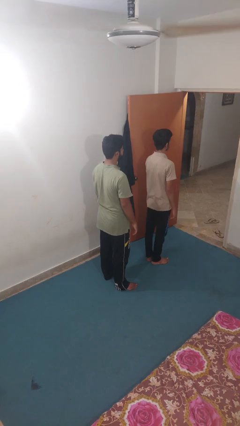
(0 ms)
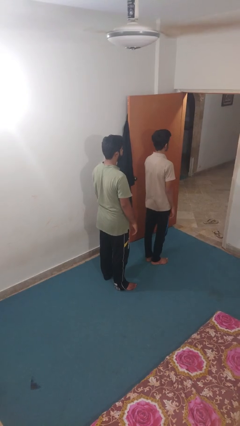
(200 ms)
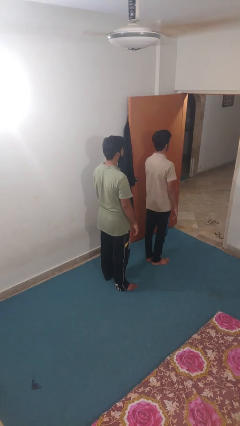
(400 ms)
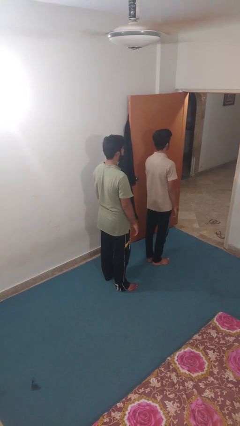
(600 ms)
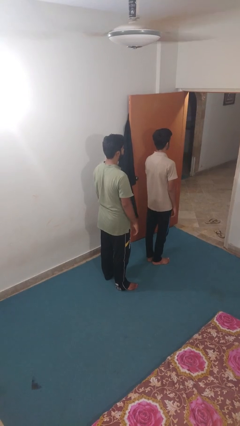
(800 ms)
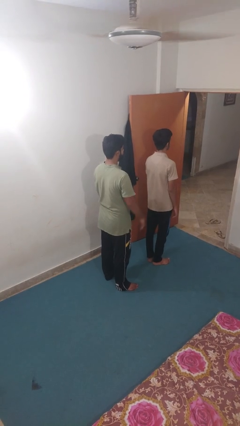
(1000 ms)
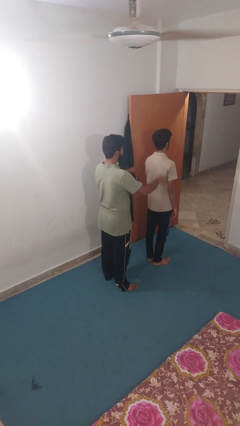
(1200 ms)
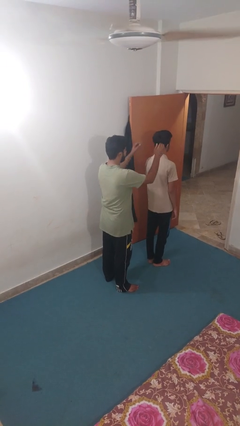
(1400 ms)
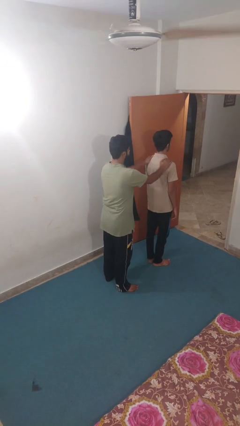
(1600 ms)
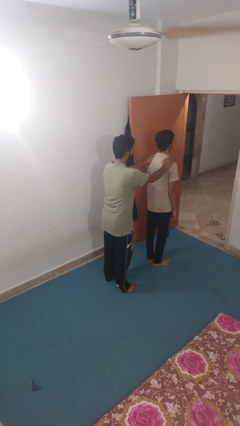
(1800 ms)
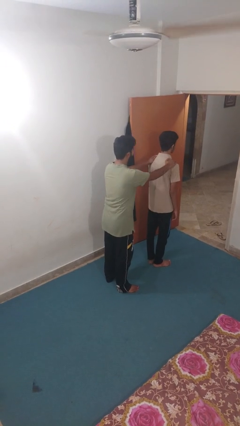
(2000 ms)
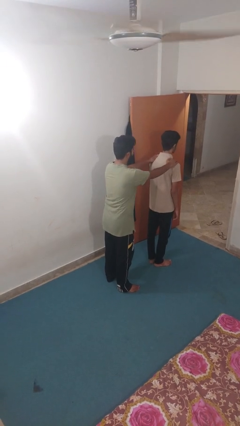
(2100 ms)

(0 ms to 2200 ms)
person grabs person by shoulder

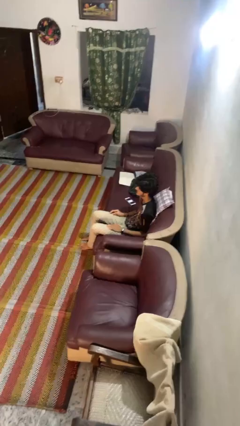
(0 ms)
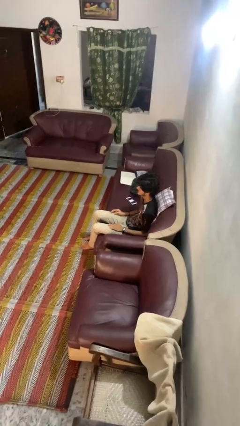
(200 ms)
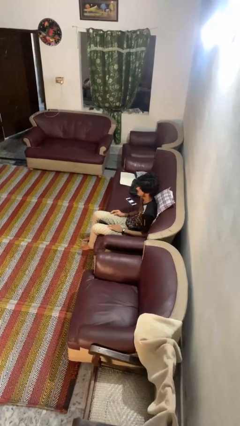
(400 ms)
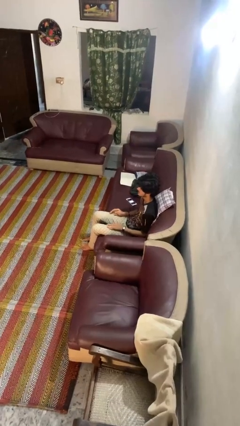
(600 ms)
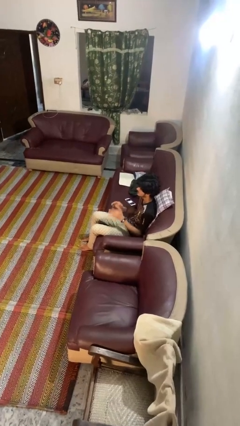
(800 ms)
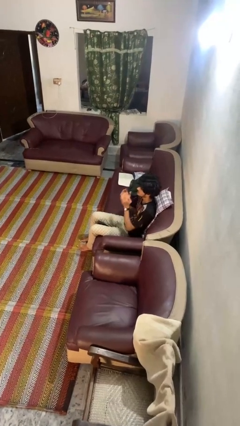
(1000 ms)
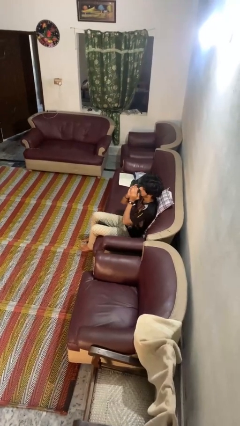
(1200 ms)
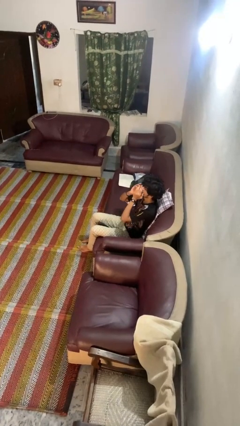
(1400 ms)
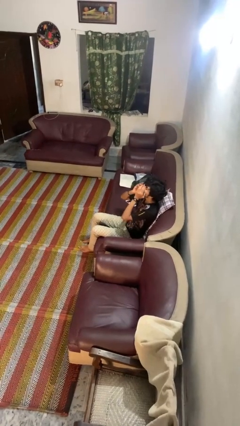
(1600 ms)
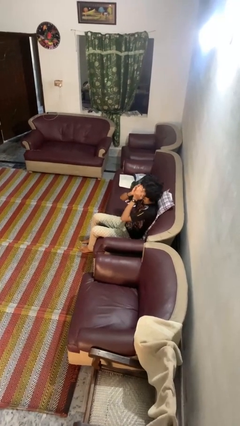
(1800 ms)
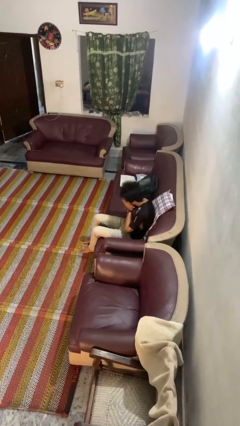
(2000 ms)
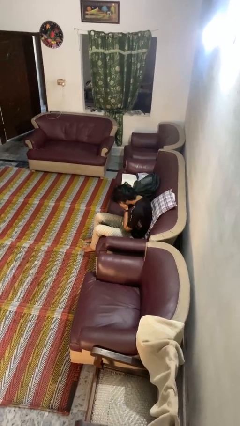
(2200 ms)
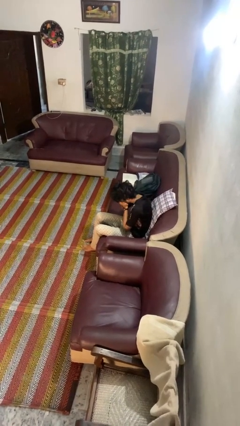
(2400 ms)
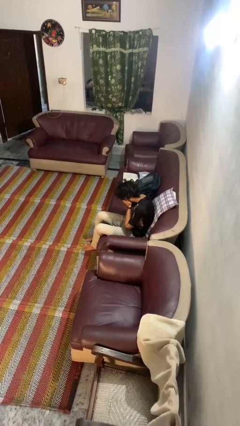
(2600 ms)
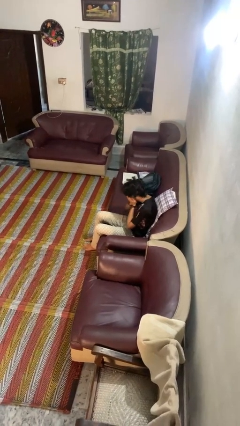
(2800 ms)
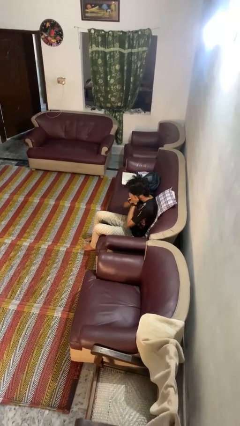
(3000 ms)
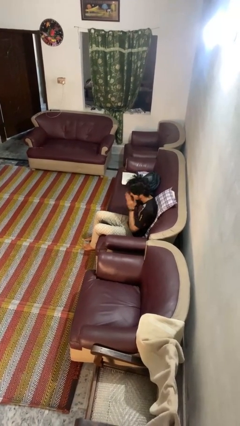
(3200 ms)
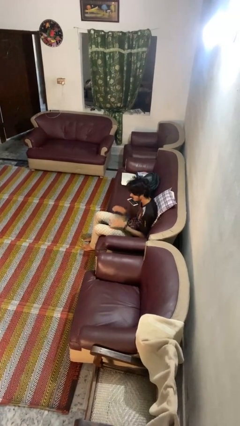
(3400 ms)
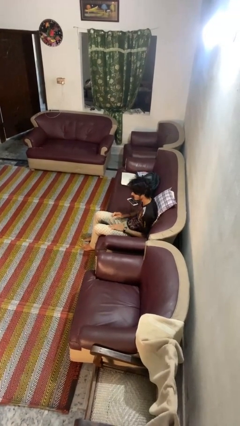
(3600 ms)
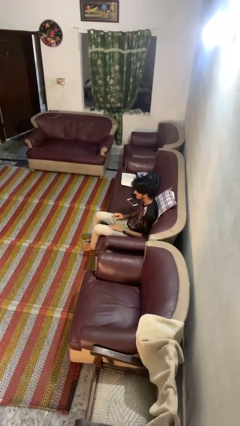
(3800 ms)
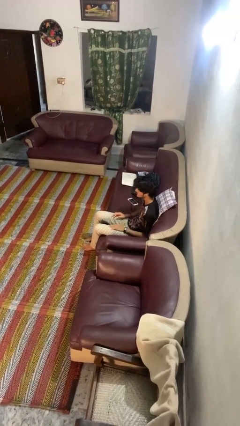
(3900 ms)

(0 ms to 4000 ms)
person sneezes into hand

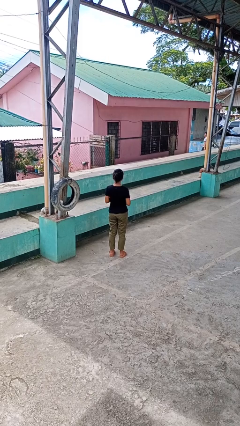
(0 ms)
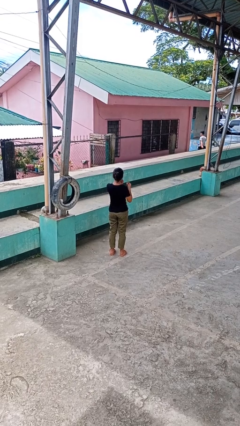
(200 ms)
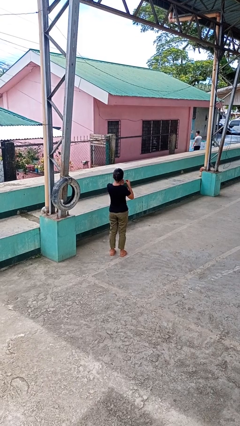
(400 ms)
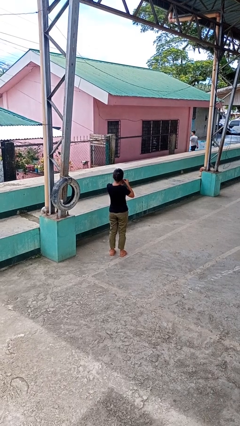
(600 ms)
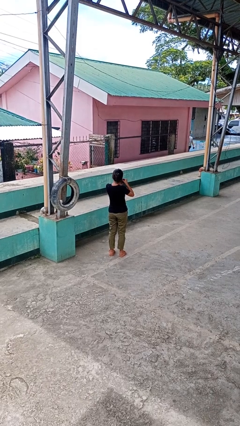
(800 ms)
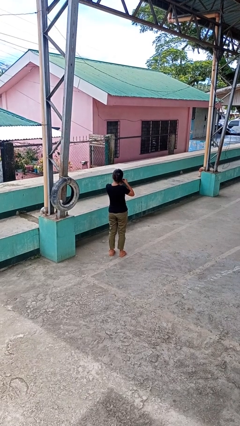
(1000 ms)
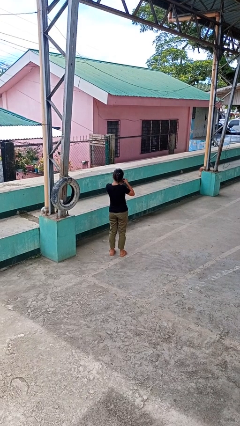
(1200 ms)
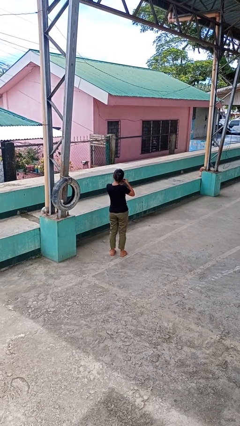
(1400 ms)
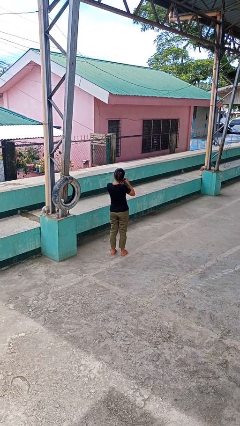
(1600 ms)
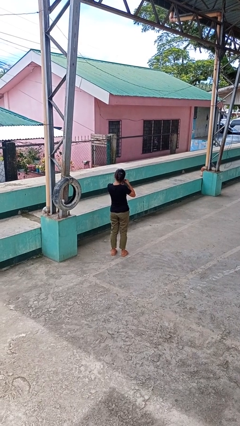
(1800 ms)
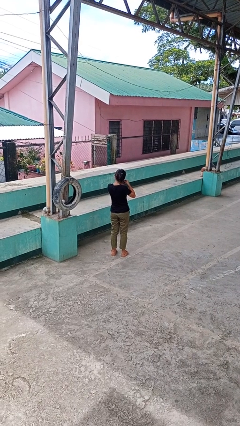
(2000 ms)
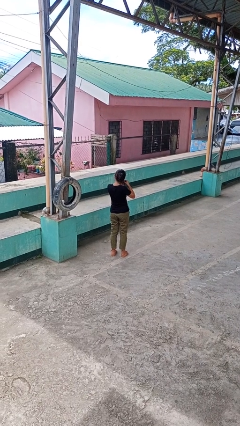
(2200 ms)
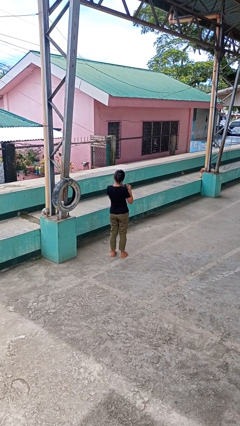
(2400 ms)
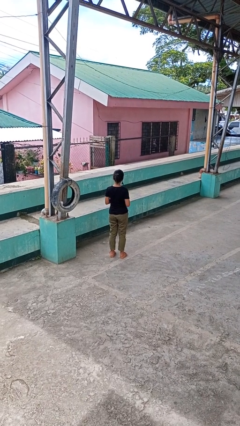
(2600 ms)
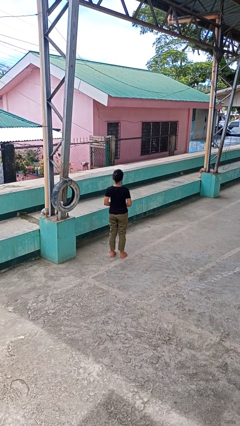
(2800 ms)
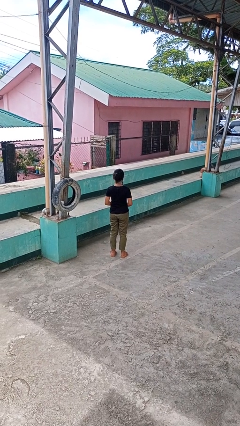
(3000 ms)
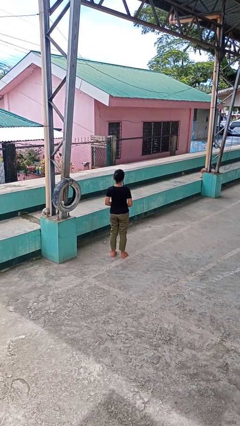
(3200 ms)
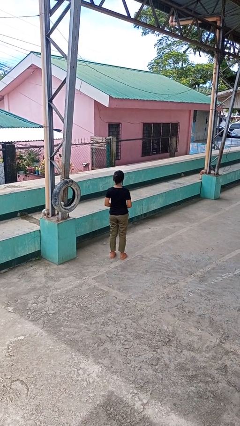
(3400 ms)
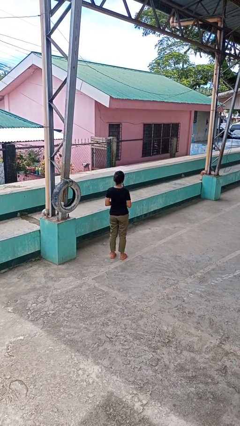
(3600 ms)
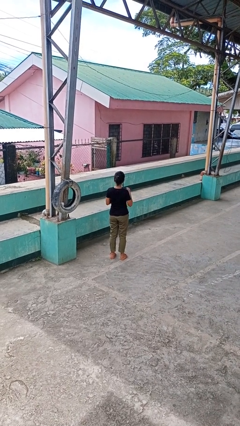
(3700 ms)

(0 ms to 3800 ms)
person puts on earrings

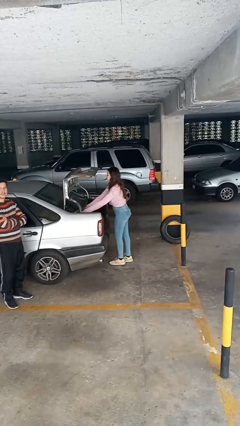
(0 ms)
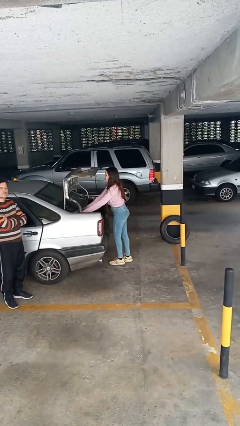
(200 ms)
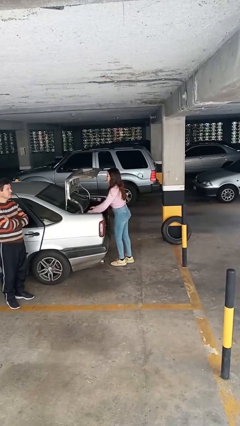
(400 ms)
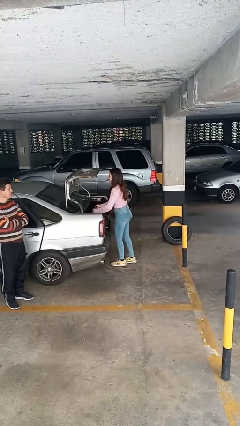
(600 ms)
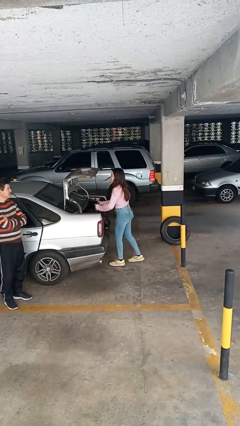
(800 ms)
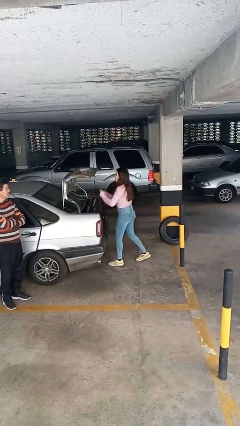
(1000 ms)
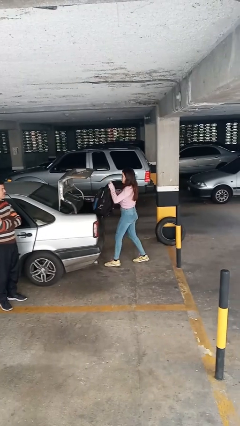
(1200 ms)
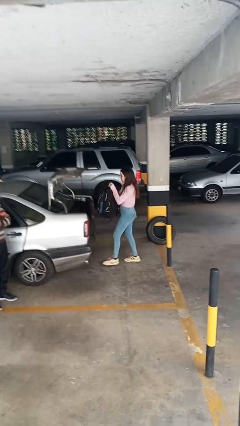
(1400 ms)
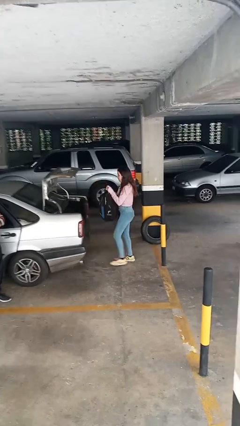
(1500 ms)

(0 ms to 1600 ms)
person unloads car

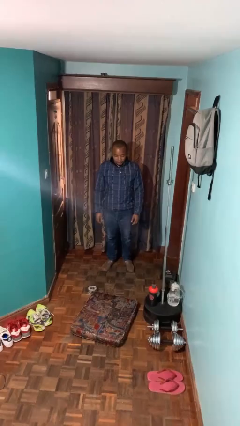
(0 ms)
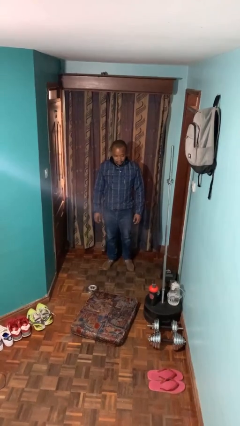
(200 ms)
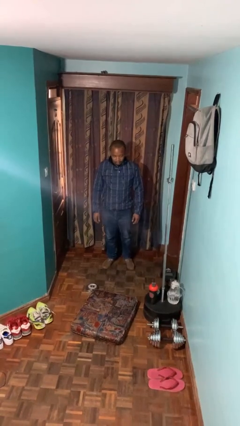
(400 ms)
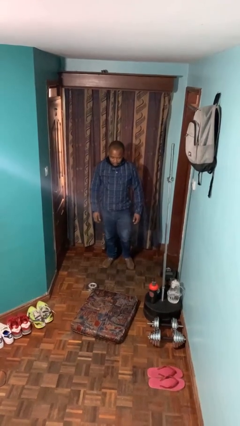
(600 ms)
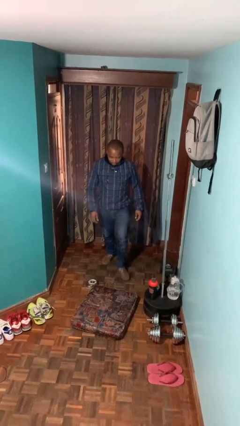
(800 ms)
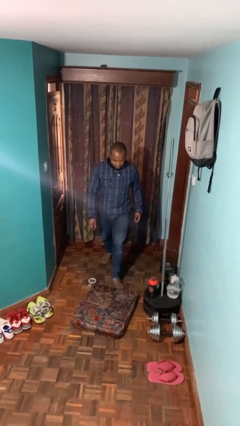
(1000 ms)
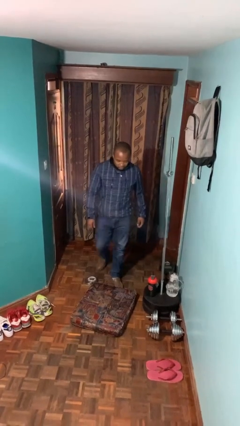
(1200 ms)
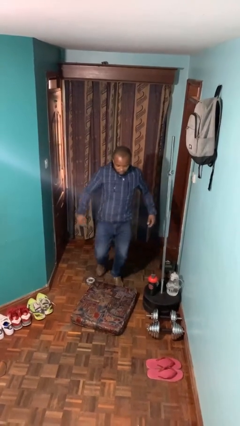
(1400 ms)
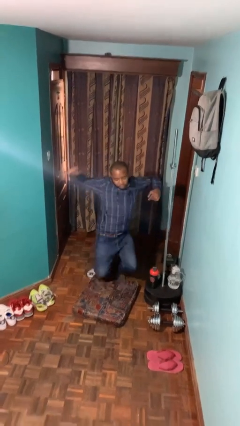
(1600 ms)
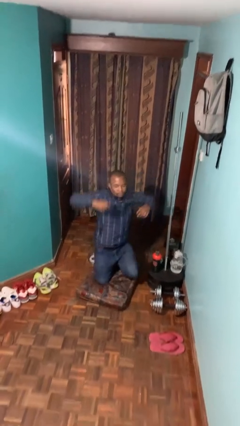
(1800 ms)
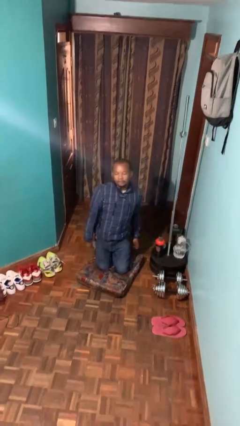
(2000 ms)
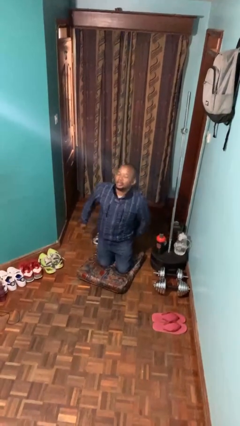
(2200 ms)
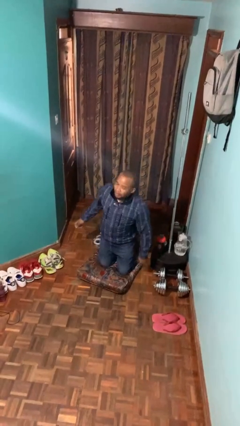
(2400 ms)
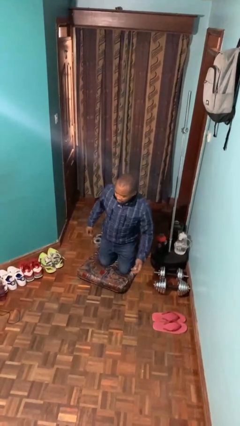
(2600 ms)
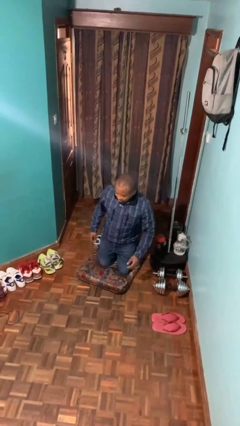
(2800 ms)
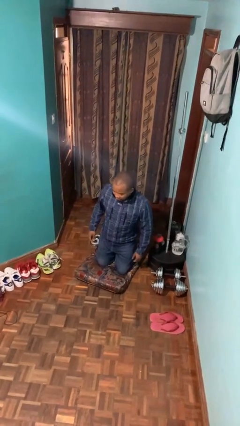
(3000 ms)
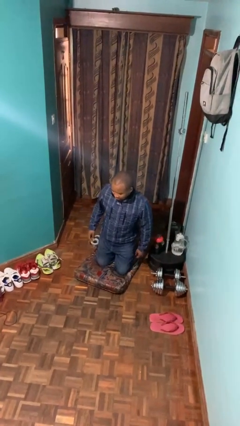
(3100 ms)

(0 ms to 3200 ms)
person trips on object on floor

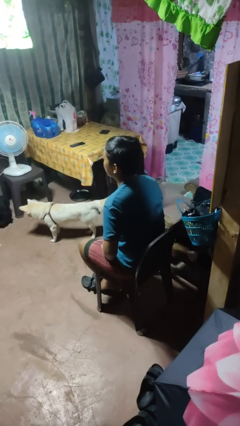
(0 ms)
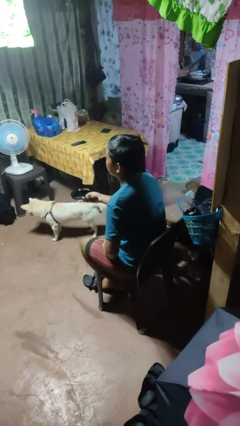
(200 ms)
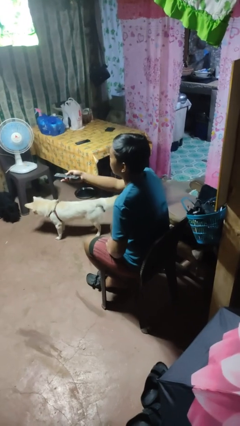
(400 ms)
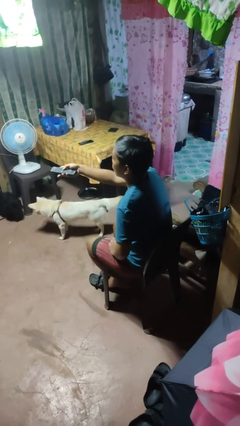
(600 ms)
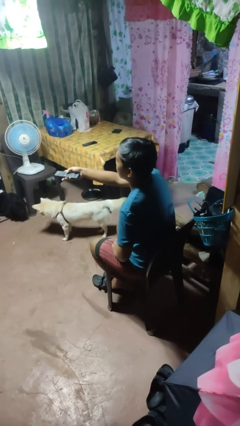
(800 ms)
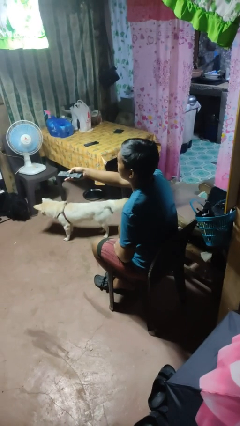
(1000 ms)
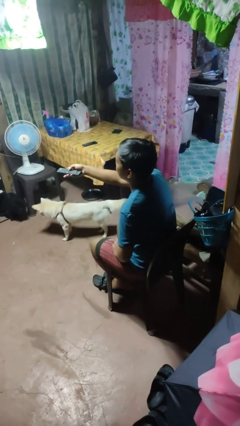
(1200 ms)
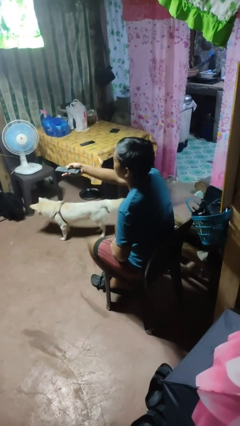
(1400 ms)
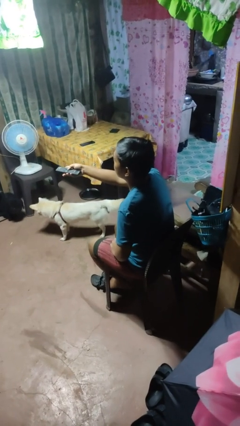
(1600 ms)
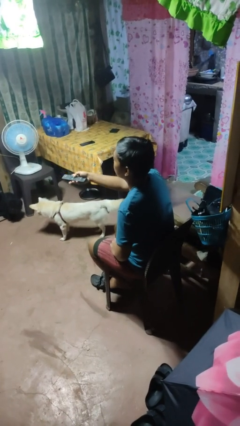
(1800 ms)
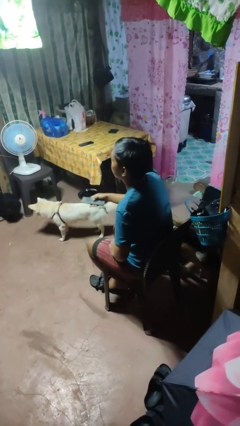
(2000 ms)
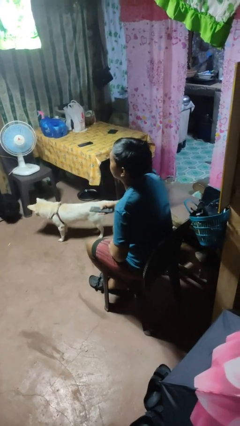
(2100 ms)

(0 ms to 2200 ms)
person uses television remote

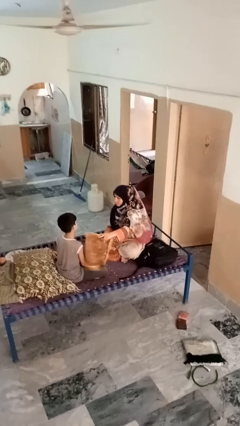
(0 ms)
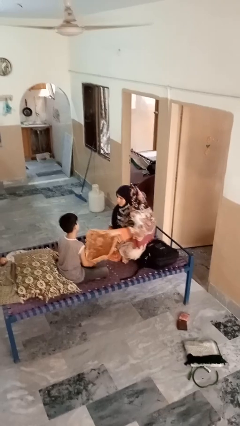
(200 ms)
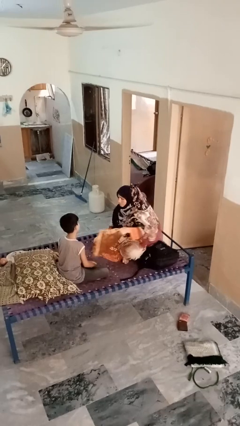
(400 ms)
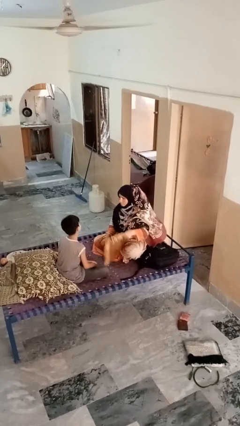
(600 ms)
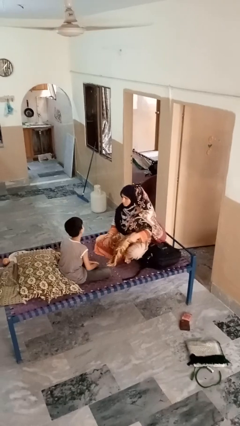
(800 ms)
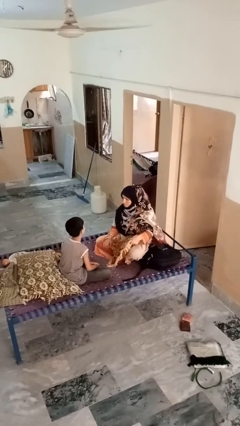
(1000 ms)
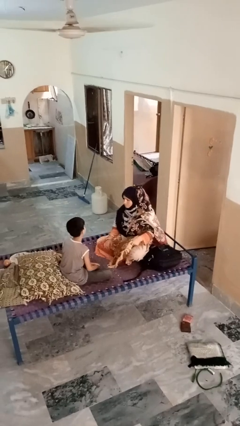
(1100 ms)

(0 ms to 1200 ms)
person hits person with pillow
